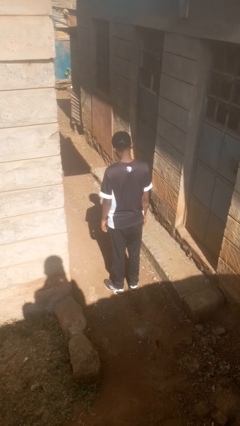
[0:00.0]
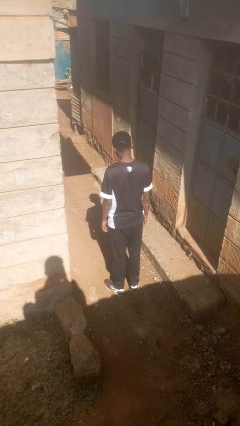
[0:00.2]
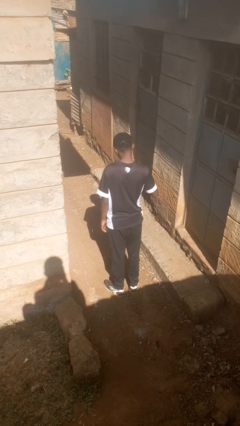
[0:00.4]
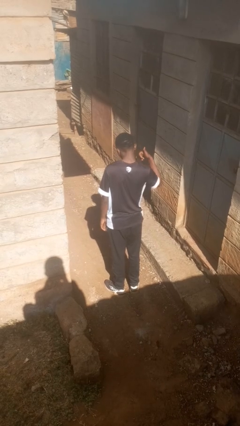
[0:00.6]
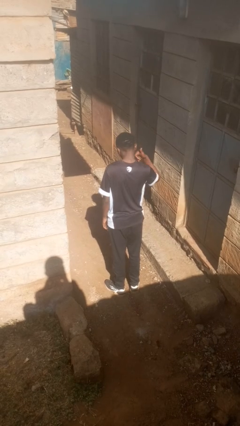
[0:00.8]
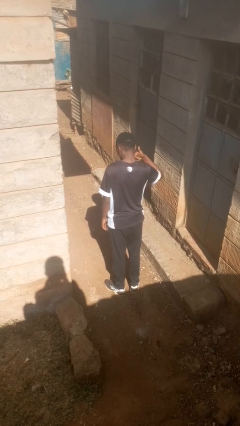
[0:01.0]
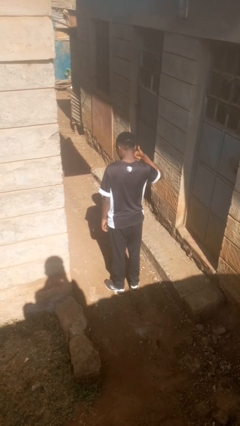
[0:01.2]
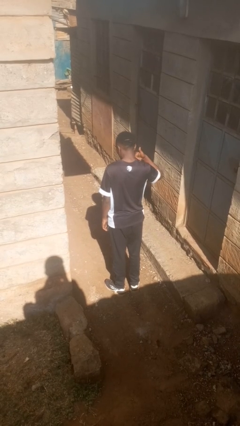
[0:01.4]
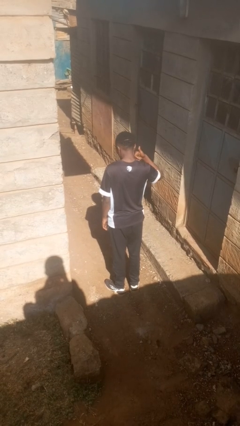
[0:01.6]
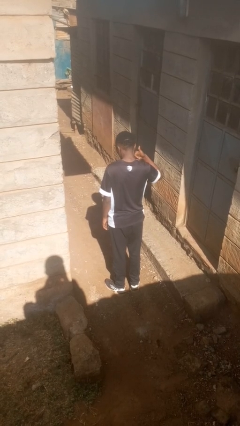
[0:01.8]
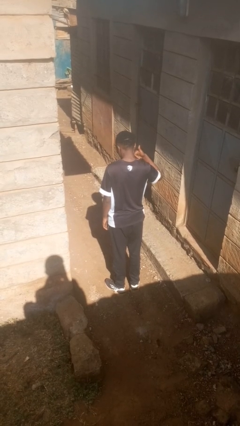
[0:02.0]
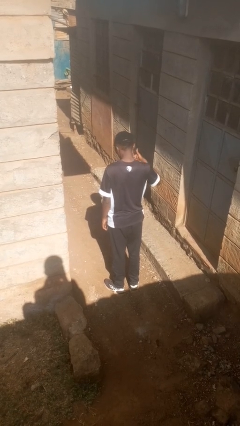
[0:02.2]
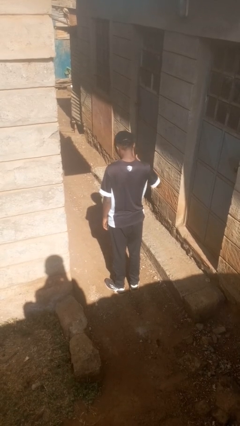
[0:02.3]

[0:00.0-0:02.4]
person gestures call me

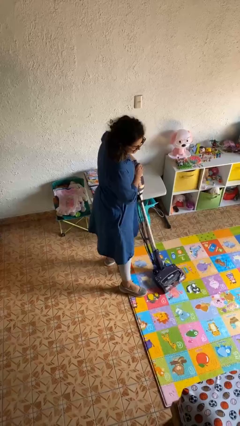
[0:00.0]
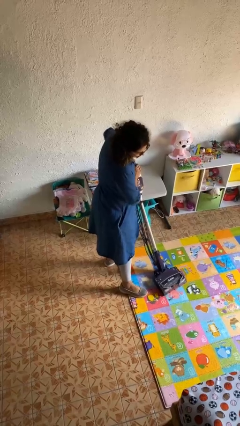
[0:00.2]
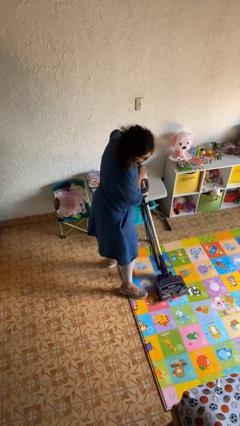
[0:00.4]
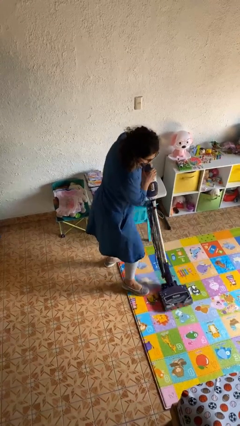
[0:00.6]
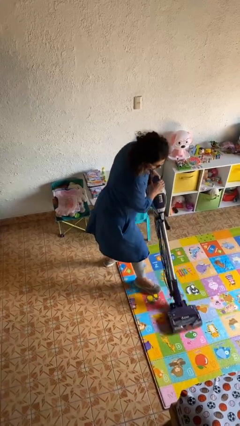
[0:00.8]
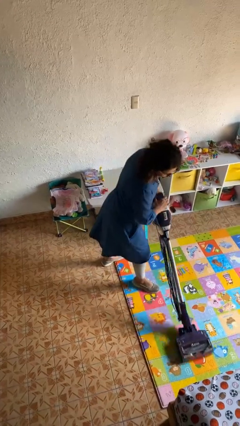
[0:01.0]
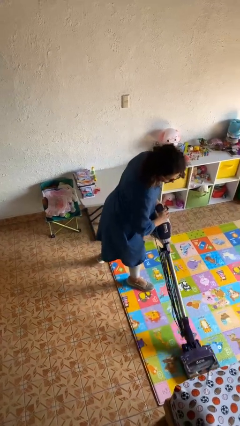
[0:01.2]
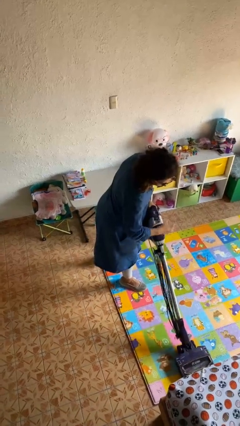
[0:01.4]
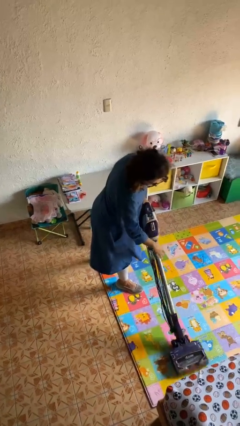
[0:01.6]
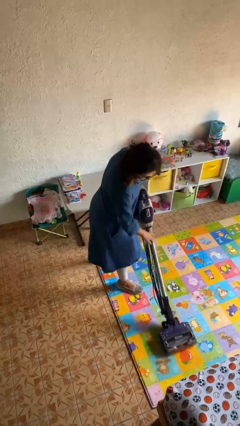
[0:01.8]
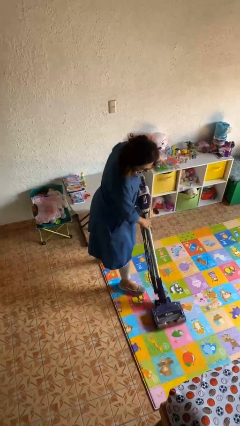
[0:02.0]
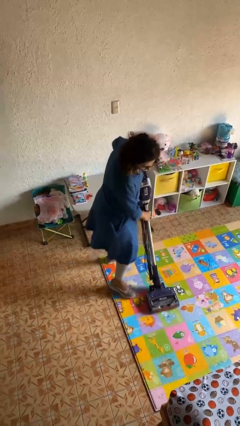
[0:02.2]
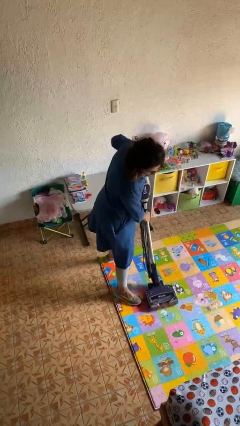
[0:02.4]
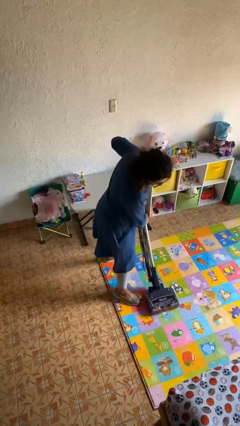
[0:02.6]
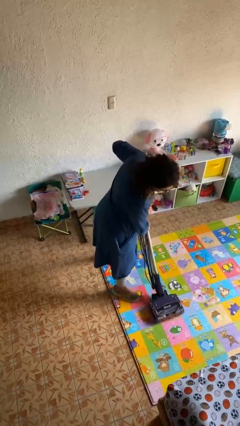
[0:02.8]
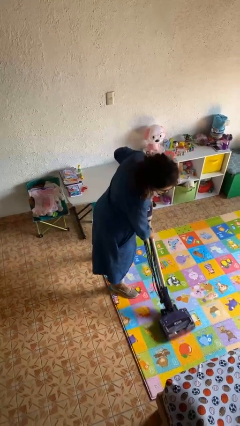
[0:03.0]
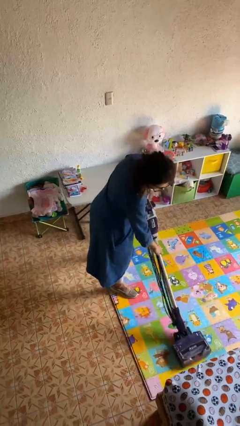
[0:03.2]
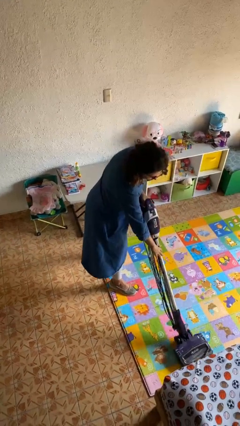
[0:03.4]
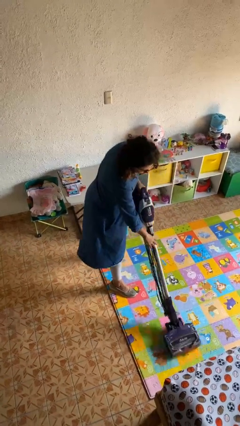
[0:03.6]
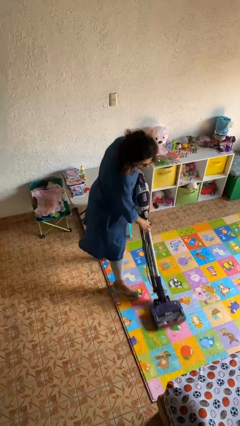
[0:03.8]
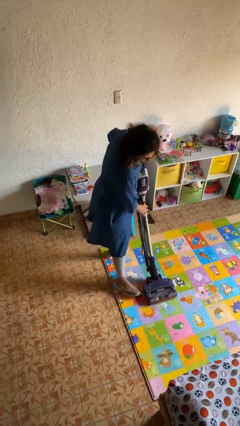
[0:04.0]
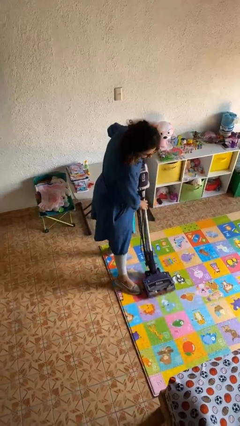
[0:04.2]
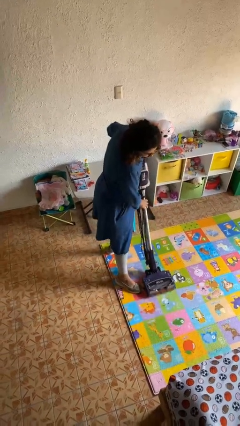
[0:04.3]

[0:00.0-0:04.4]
person vacuums carpet

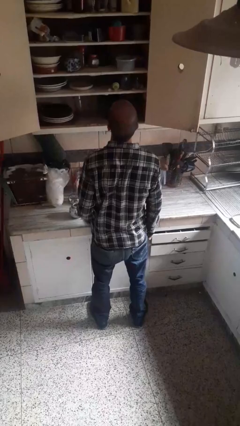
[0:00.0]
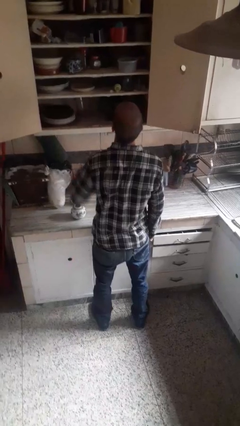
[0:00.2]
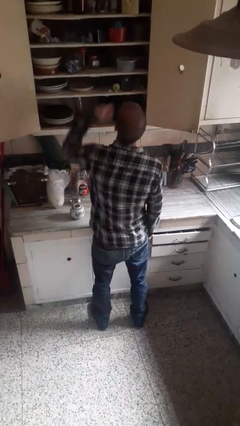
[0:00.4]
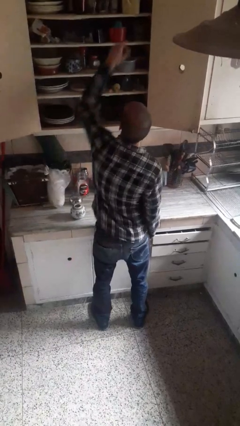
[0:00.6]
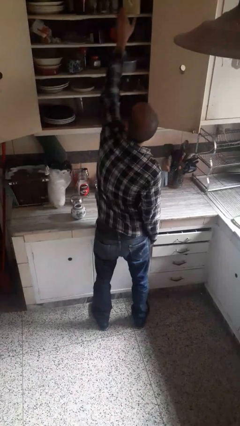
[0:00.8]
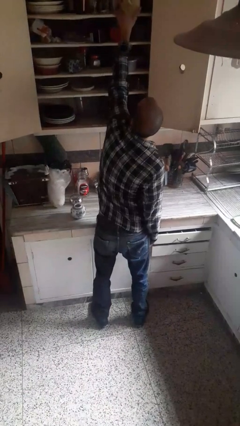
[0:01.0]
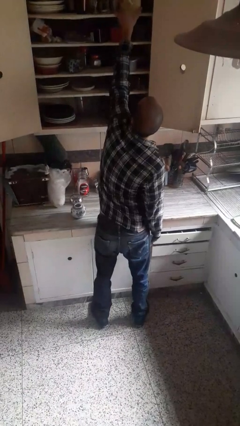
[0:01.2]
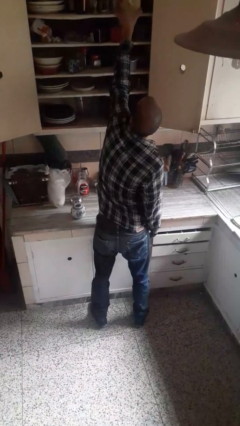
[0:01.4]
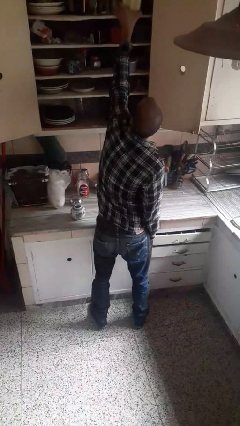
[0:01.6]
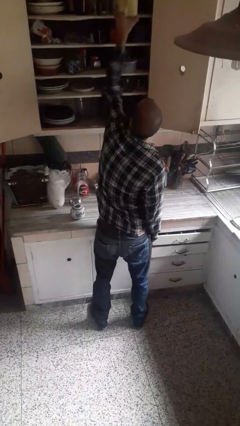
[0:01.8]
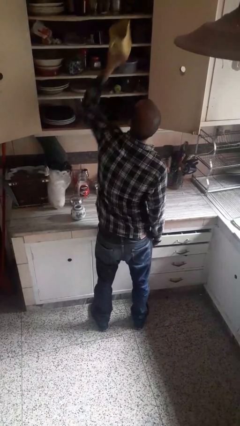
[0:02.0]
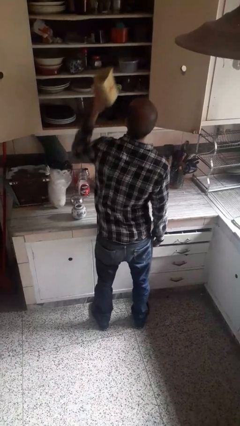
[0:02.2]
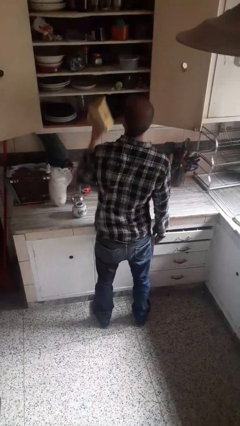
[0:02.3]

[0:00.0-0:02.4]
person takes object from cabinet

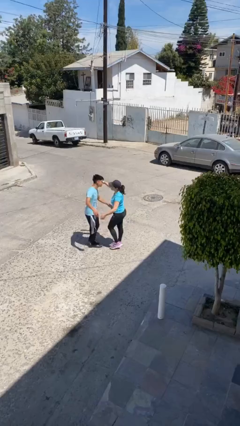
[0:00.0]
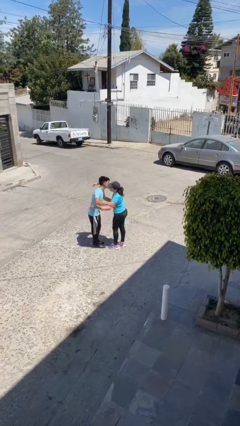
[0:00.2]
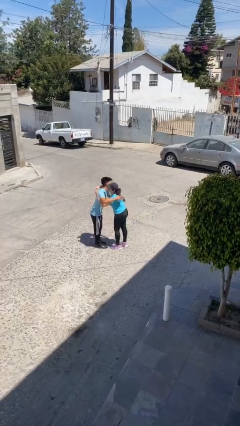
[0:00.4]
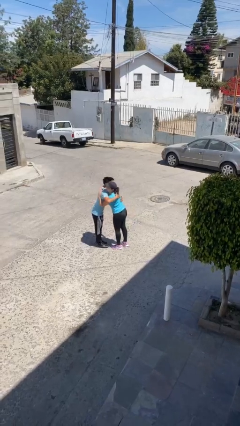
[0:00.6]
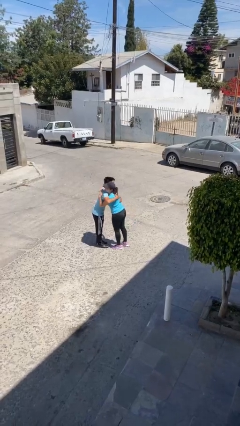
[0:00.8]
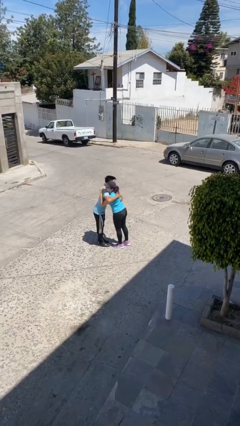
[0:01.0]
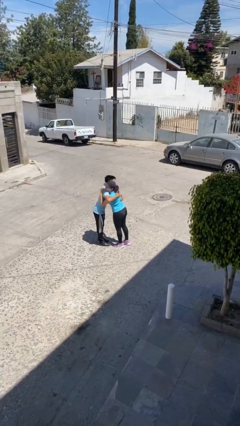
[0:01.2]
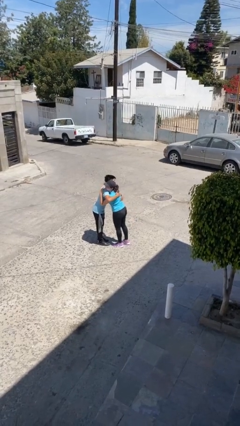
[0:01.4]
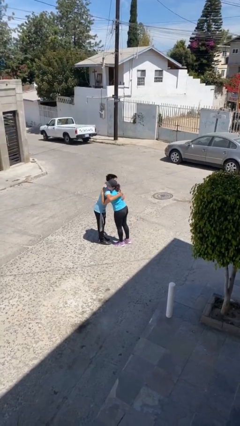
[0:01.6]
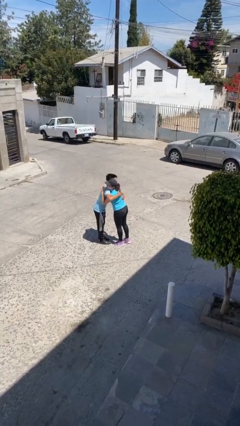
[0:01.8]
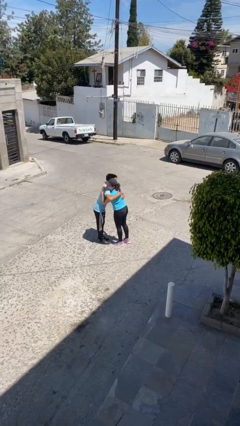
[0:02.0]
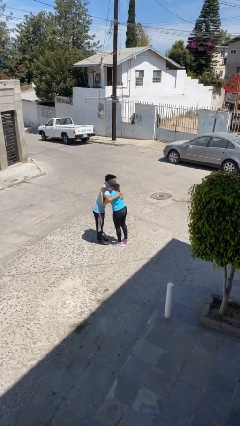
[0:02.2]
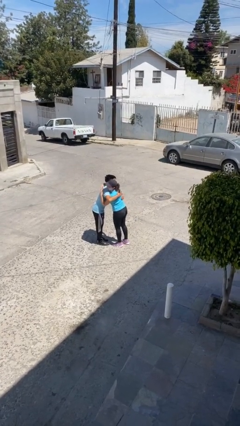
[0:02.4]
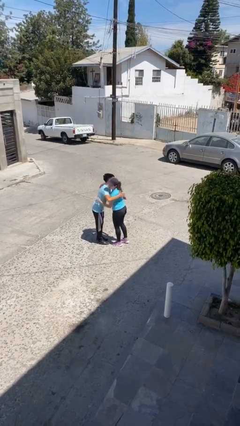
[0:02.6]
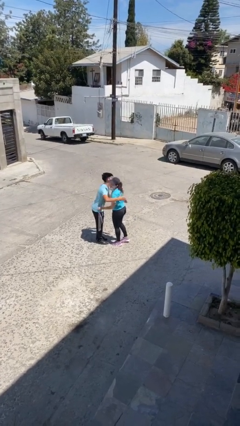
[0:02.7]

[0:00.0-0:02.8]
person embraces person

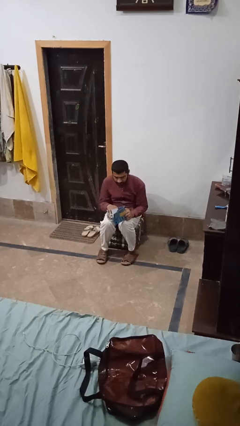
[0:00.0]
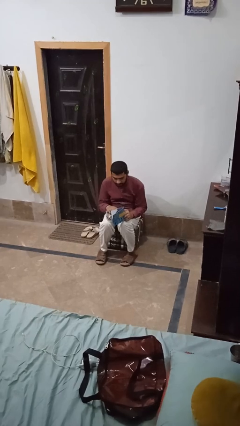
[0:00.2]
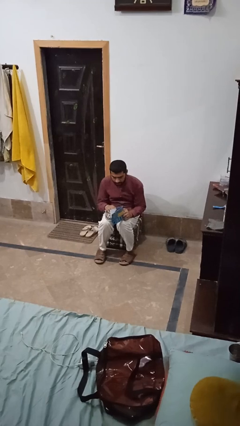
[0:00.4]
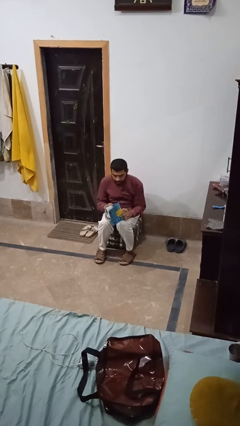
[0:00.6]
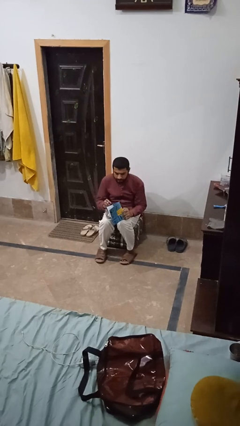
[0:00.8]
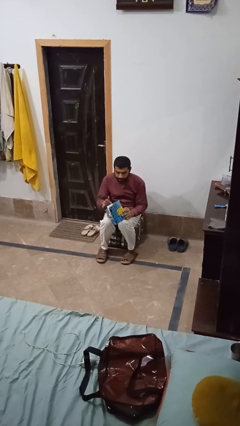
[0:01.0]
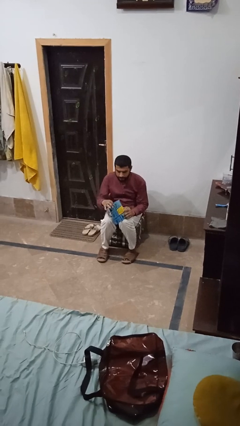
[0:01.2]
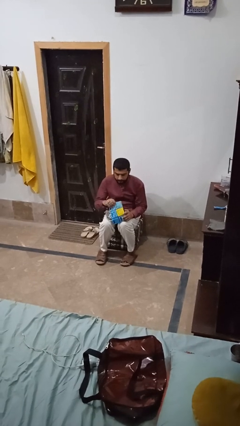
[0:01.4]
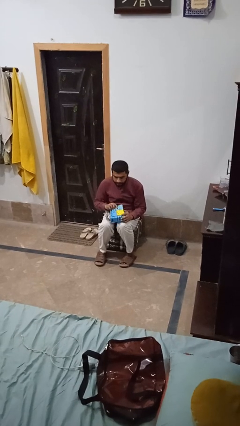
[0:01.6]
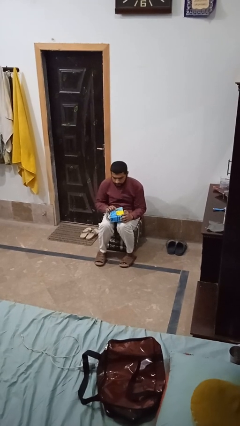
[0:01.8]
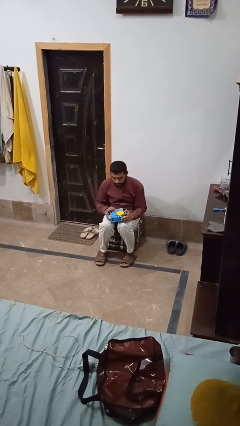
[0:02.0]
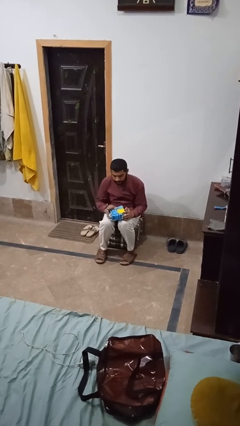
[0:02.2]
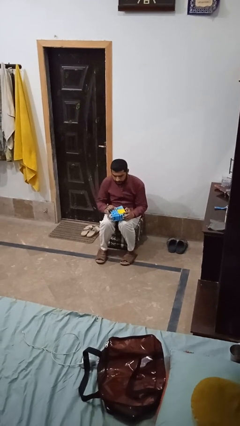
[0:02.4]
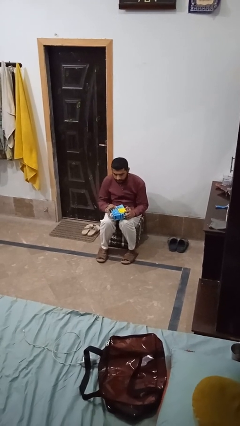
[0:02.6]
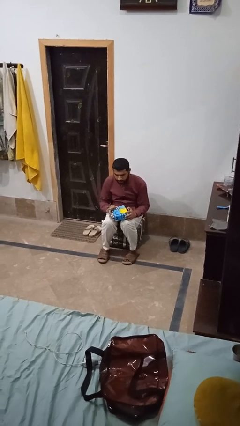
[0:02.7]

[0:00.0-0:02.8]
person closes jewelry box

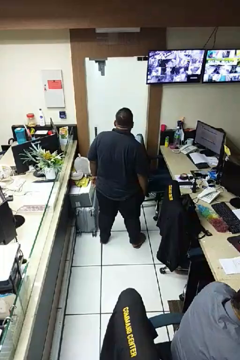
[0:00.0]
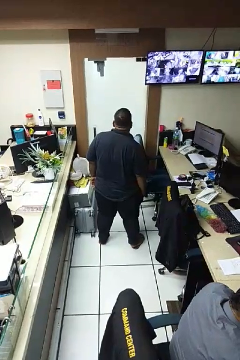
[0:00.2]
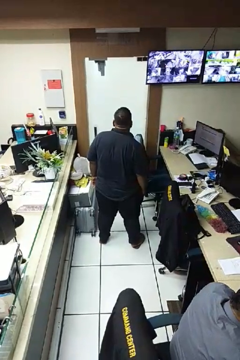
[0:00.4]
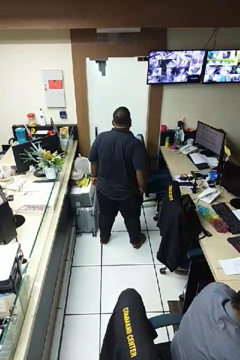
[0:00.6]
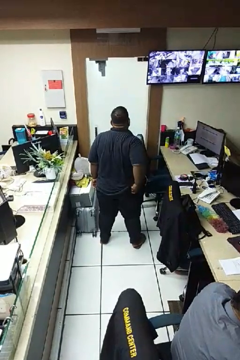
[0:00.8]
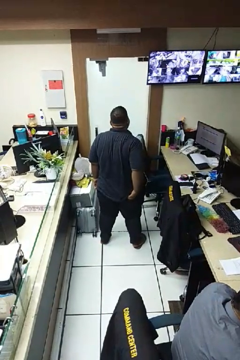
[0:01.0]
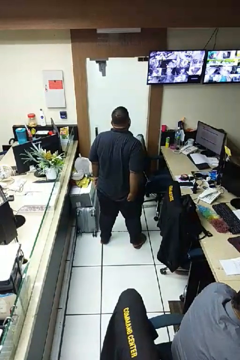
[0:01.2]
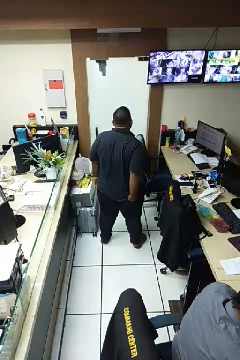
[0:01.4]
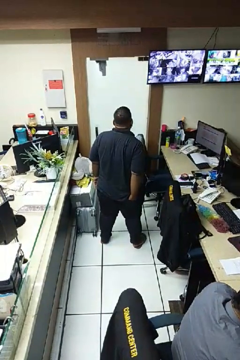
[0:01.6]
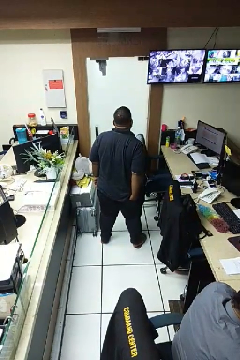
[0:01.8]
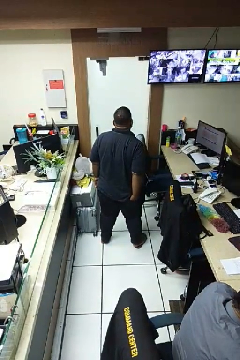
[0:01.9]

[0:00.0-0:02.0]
person puts hands in back pockets

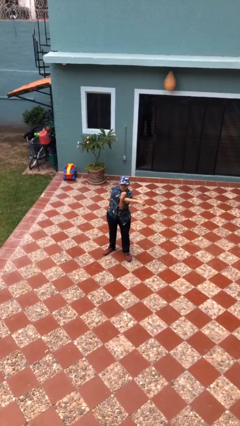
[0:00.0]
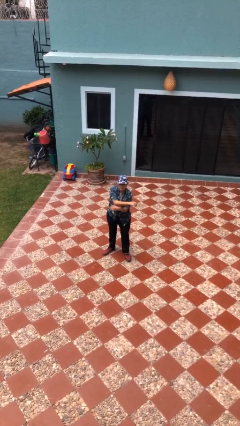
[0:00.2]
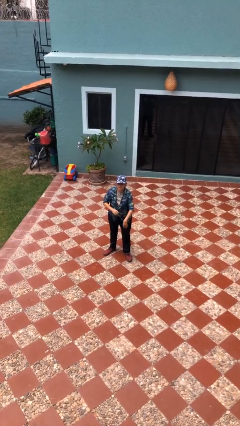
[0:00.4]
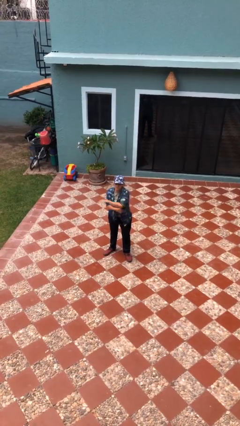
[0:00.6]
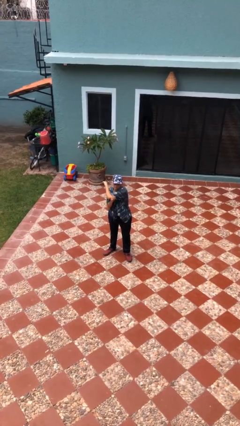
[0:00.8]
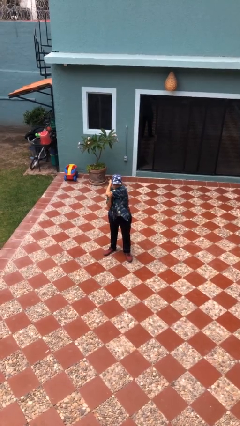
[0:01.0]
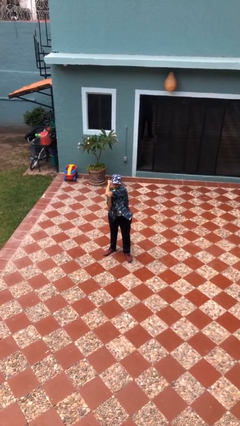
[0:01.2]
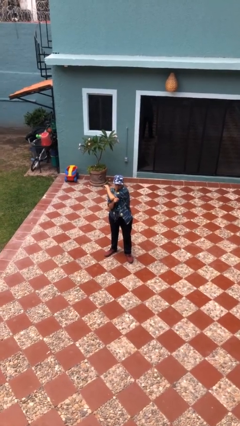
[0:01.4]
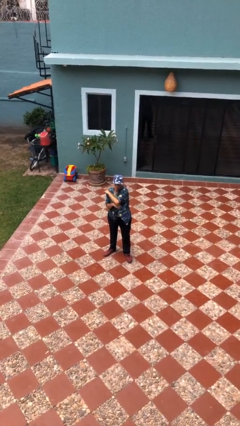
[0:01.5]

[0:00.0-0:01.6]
person stretches arms to side
